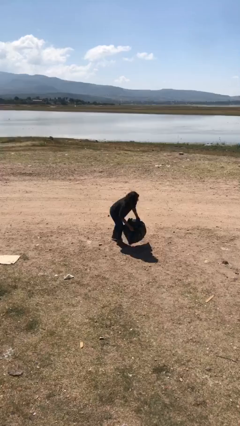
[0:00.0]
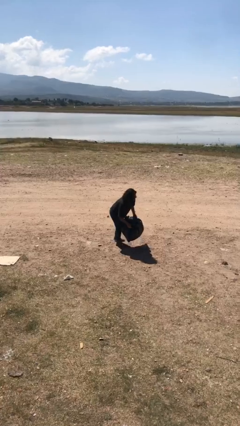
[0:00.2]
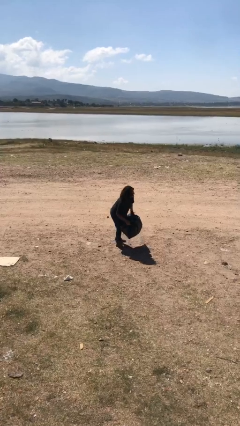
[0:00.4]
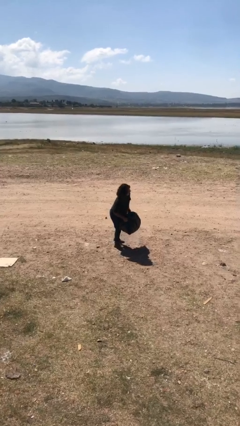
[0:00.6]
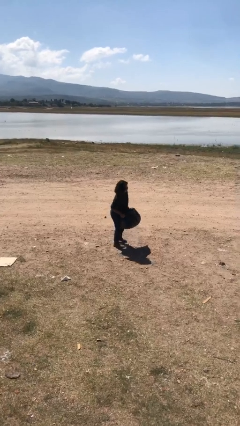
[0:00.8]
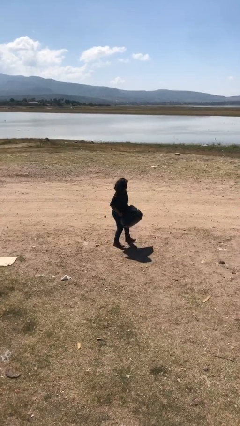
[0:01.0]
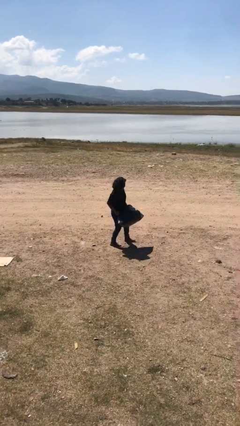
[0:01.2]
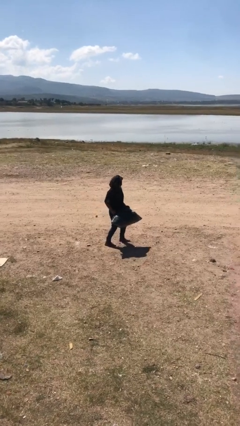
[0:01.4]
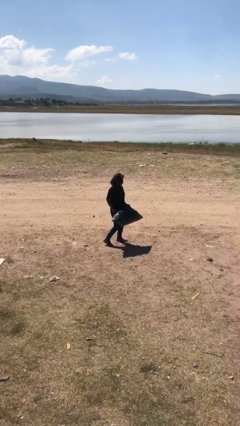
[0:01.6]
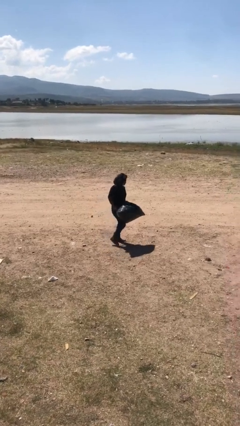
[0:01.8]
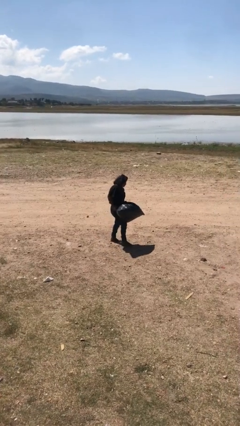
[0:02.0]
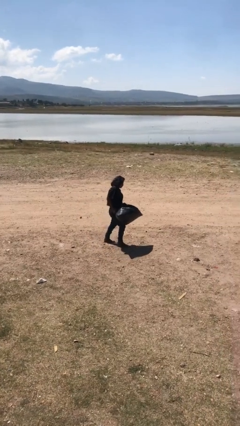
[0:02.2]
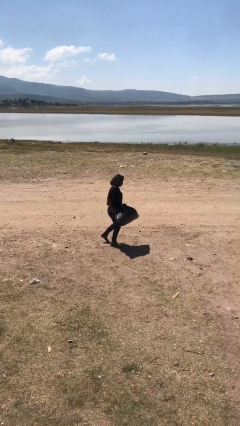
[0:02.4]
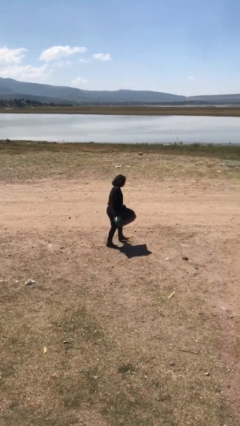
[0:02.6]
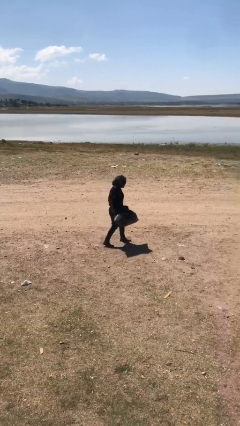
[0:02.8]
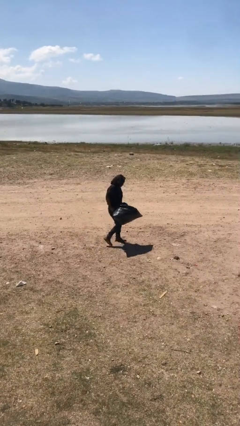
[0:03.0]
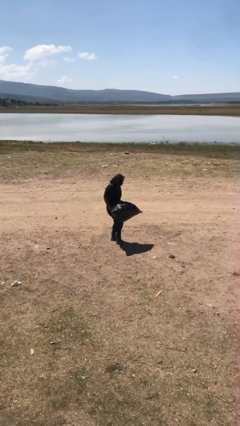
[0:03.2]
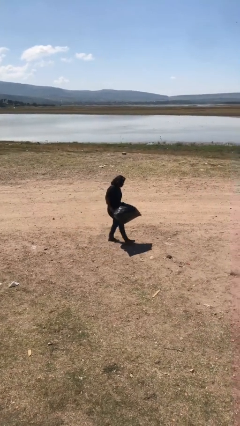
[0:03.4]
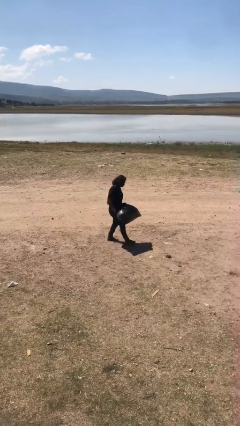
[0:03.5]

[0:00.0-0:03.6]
person carries heavy object

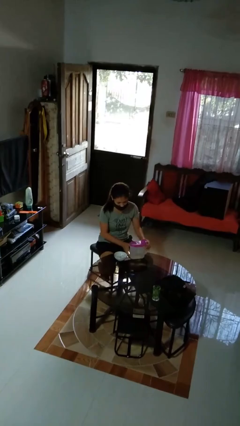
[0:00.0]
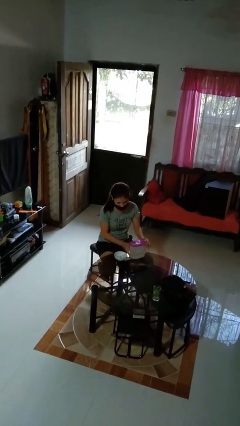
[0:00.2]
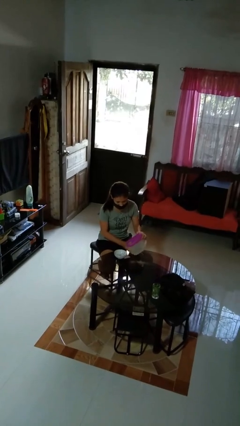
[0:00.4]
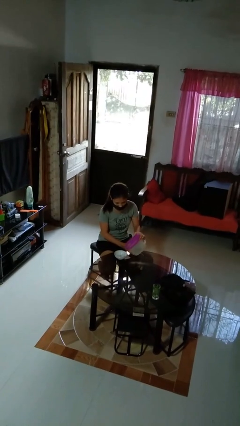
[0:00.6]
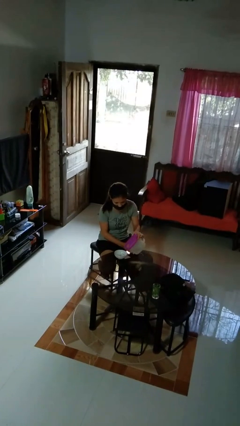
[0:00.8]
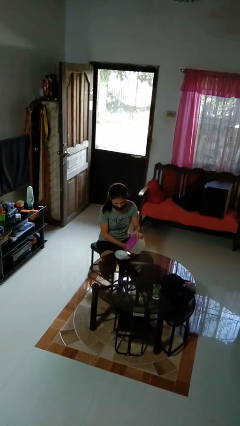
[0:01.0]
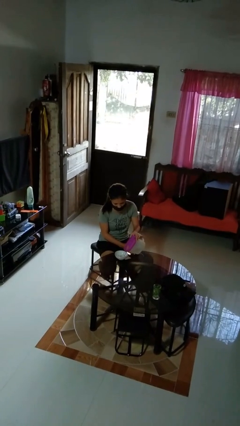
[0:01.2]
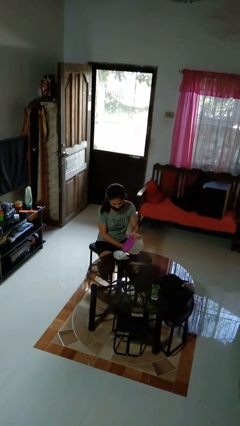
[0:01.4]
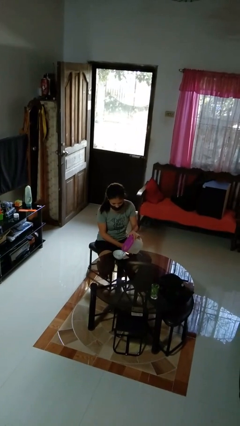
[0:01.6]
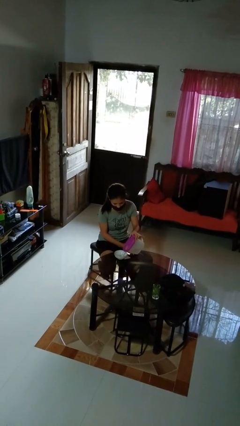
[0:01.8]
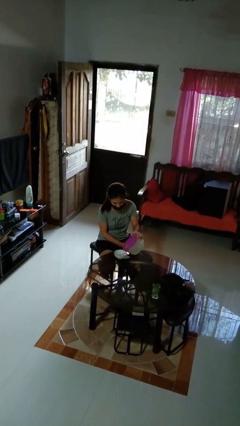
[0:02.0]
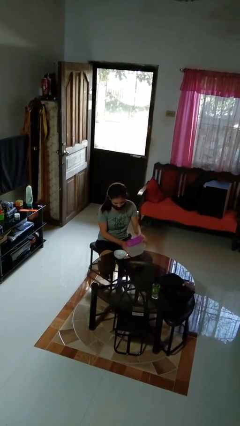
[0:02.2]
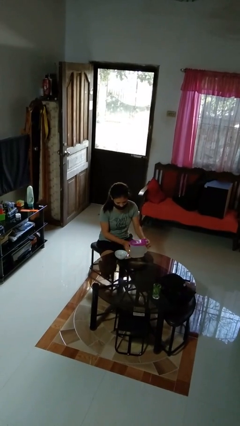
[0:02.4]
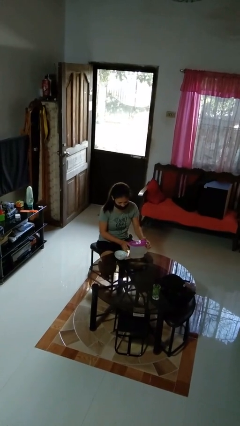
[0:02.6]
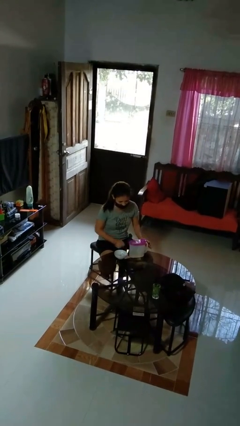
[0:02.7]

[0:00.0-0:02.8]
person pours into bowl

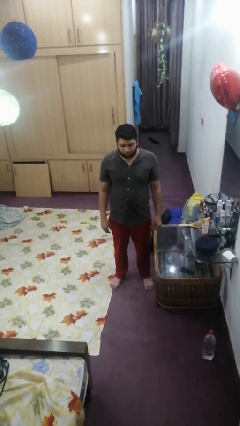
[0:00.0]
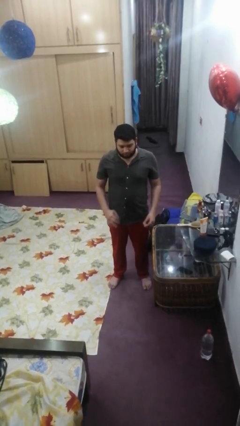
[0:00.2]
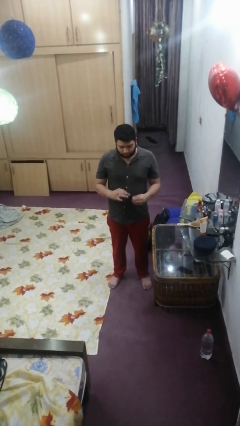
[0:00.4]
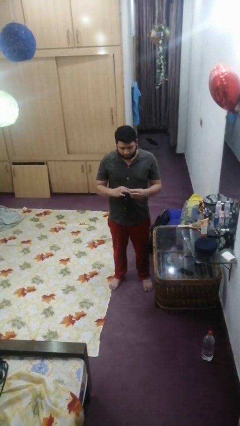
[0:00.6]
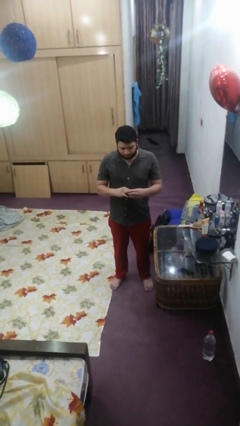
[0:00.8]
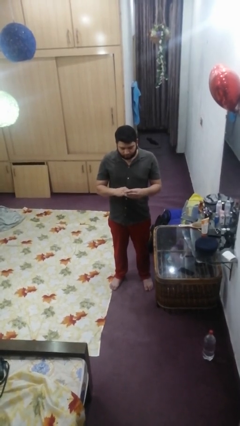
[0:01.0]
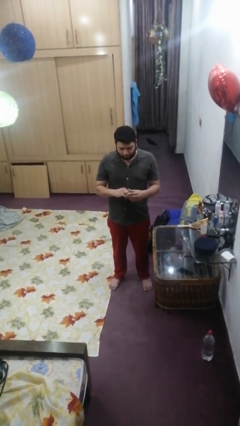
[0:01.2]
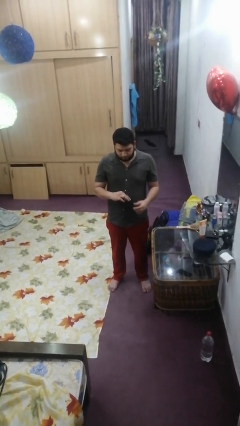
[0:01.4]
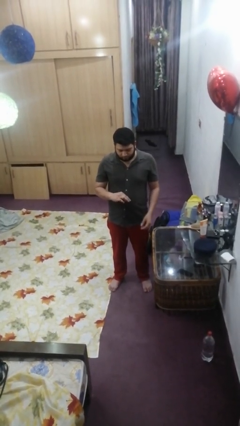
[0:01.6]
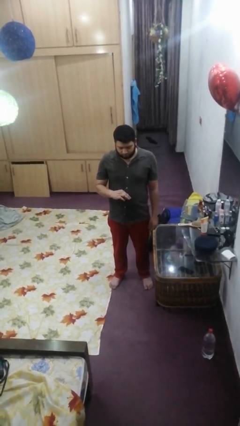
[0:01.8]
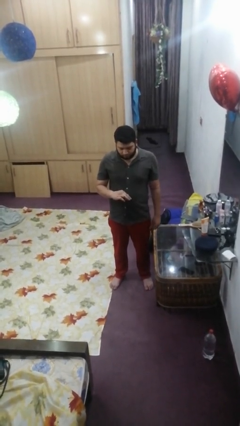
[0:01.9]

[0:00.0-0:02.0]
person puts on ring

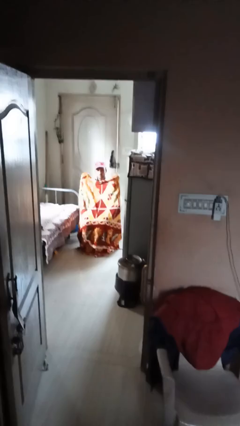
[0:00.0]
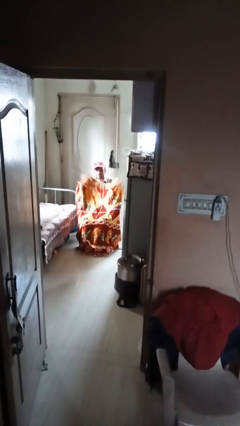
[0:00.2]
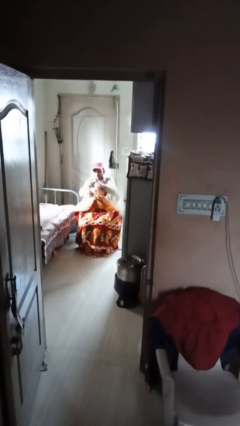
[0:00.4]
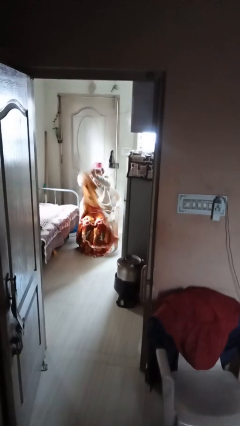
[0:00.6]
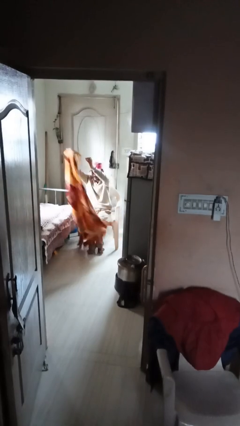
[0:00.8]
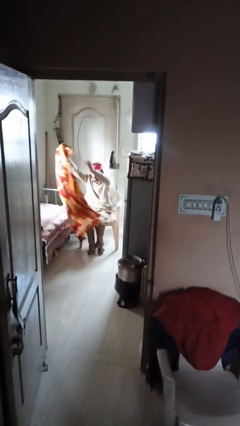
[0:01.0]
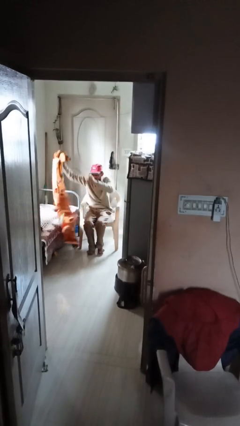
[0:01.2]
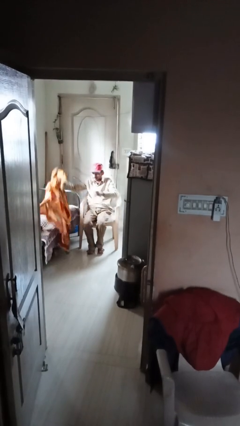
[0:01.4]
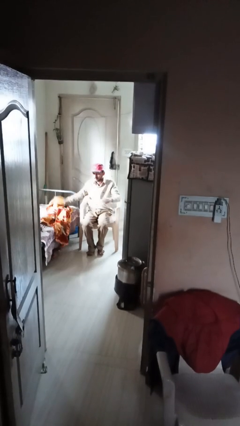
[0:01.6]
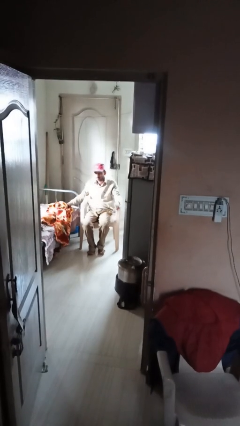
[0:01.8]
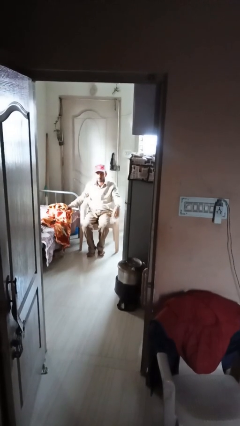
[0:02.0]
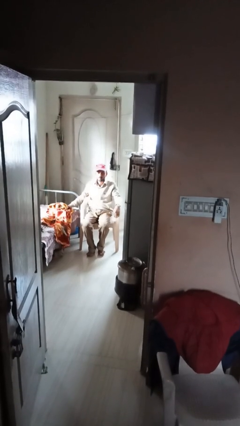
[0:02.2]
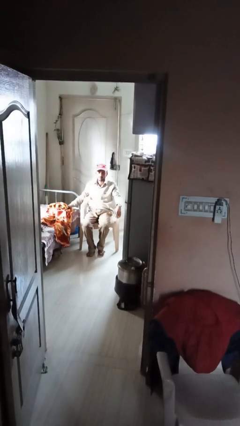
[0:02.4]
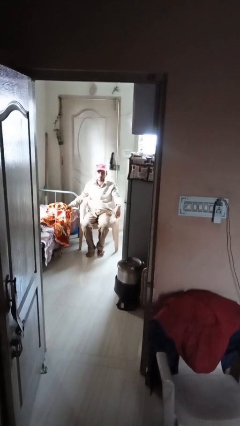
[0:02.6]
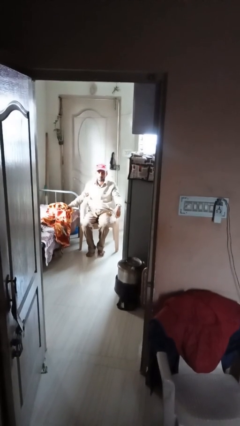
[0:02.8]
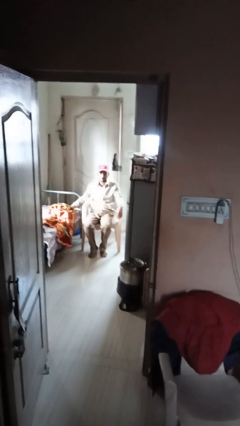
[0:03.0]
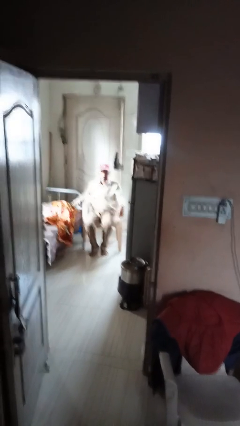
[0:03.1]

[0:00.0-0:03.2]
person uncovers with blanket

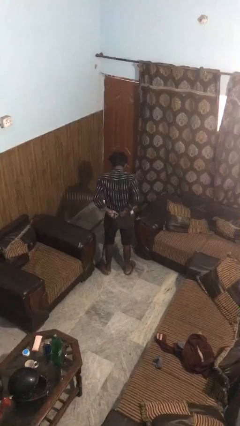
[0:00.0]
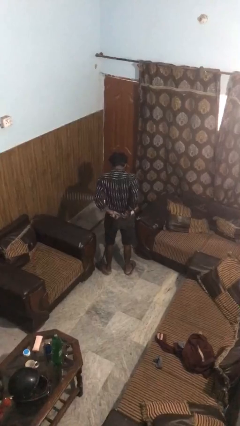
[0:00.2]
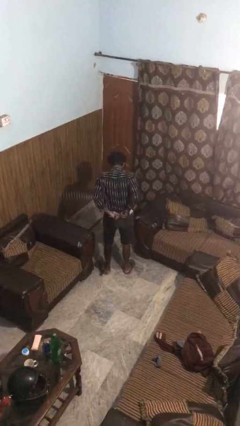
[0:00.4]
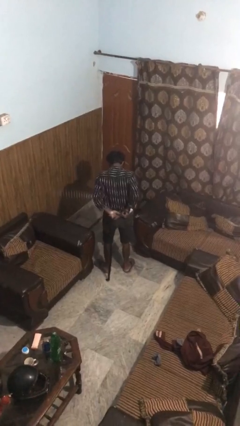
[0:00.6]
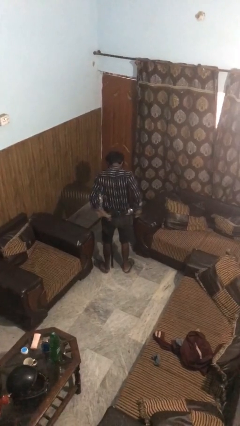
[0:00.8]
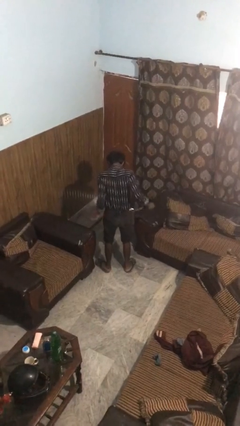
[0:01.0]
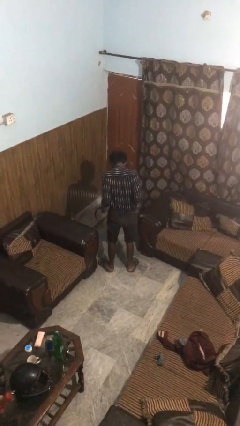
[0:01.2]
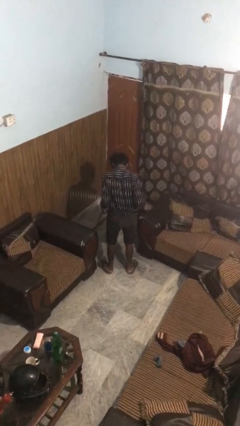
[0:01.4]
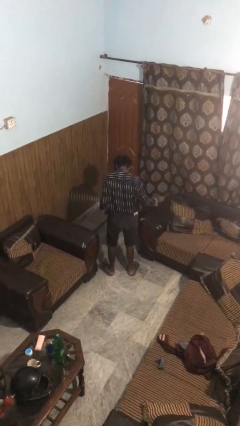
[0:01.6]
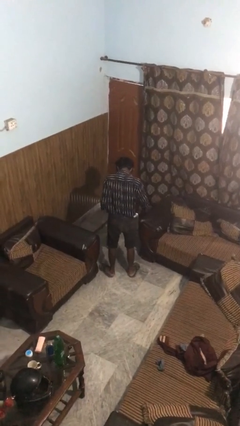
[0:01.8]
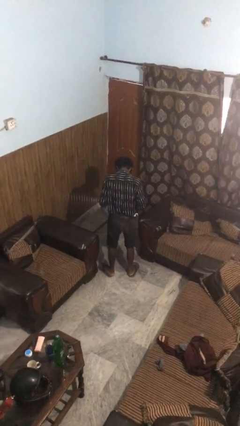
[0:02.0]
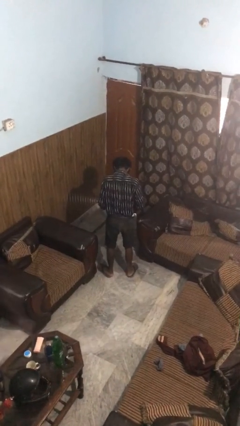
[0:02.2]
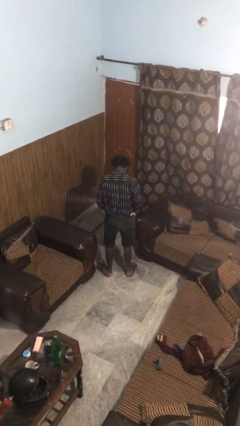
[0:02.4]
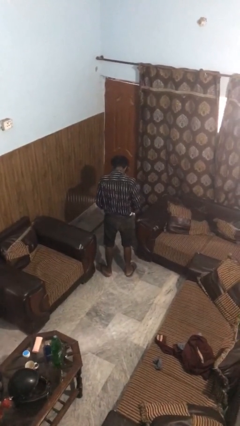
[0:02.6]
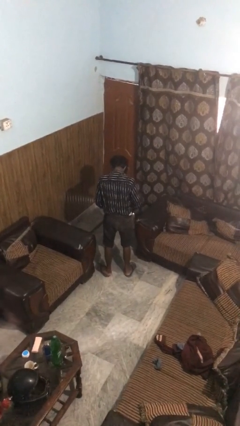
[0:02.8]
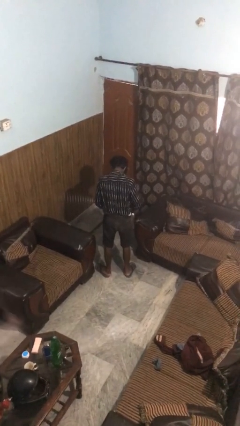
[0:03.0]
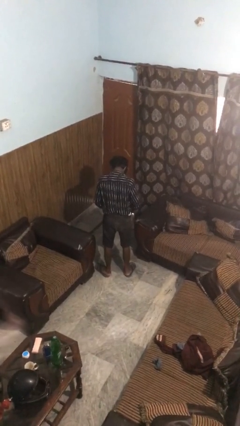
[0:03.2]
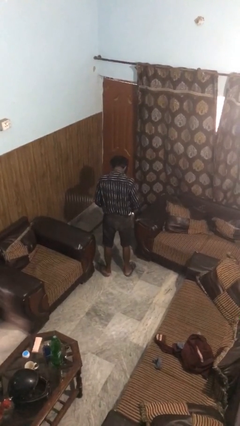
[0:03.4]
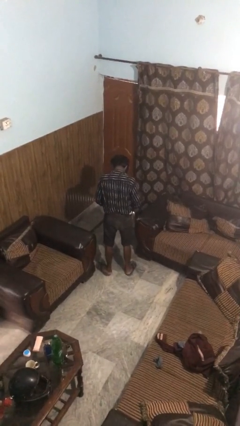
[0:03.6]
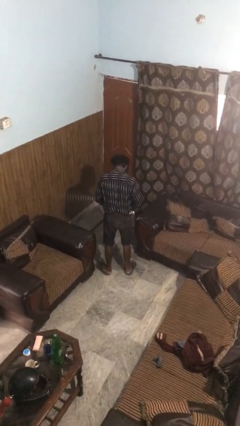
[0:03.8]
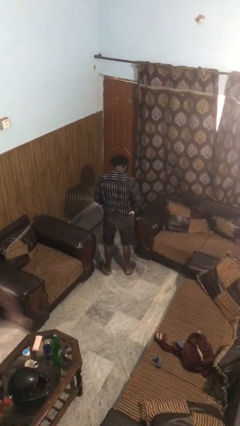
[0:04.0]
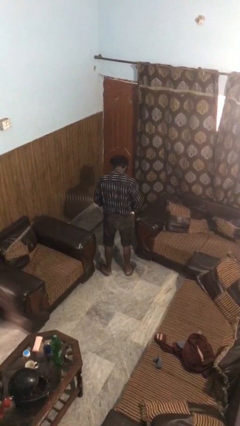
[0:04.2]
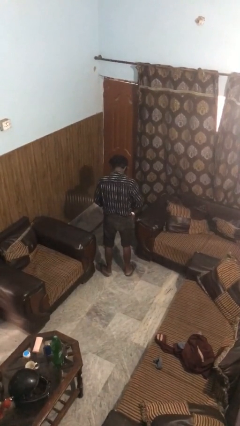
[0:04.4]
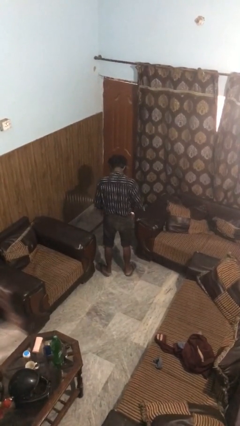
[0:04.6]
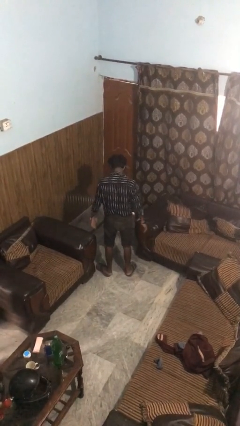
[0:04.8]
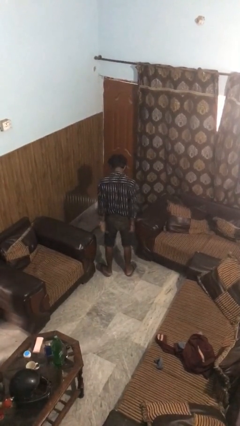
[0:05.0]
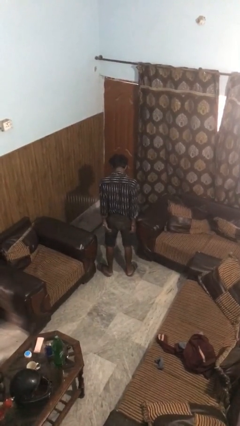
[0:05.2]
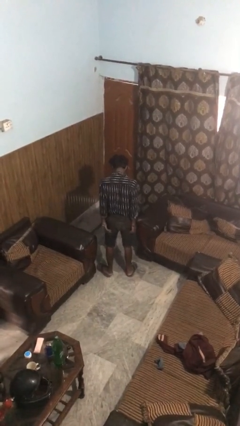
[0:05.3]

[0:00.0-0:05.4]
person puts on belt

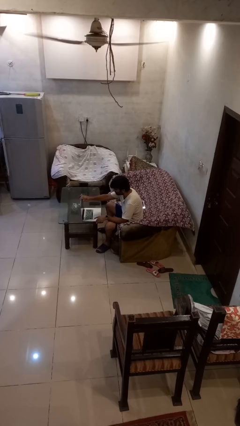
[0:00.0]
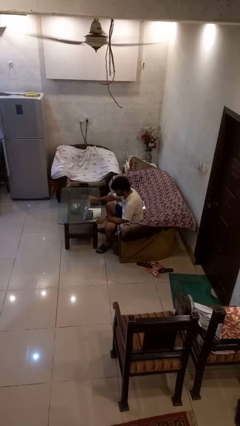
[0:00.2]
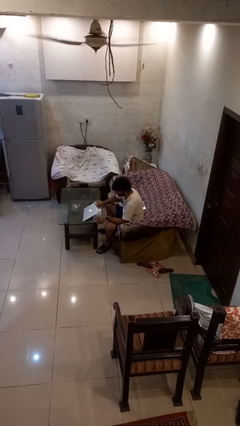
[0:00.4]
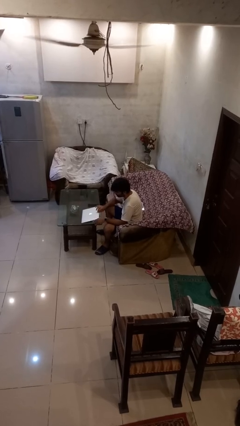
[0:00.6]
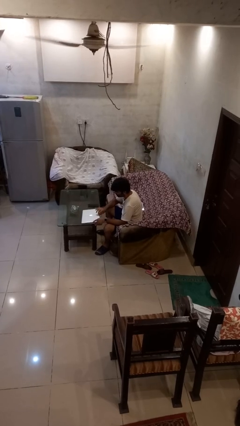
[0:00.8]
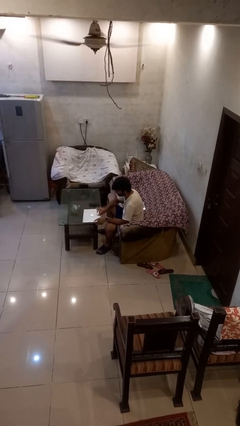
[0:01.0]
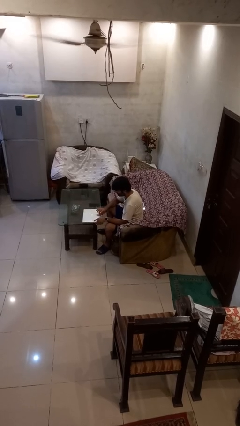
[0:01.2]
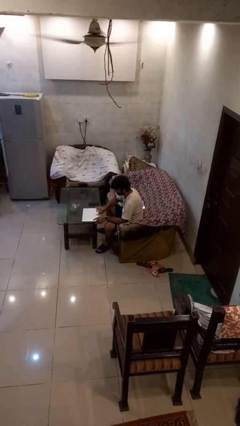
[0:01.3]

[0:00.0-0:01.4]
person closes laptop
